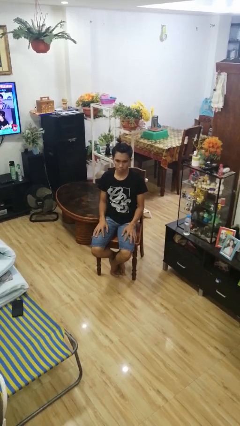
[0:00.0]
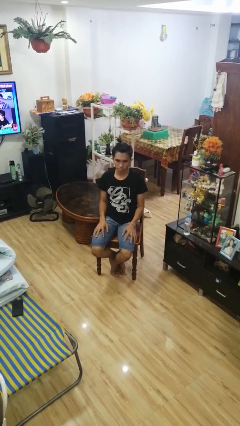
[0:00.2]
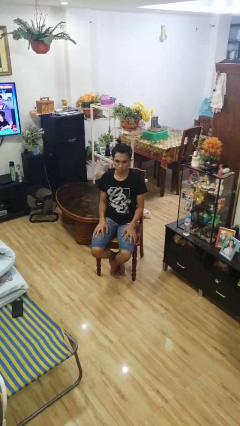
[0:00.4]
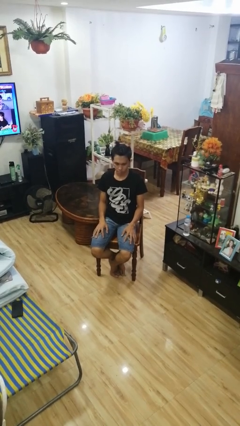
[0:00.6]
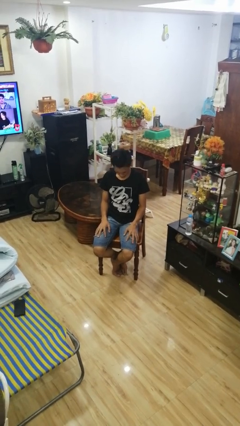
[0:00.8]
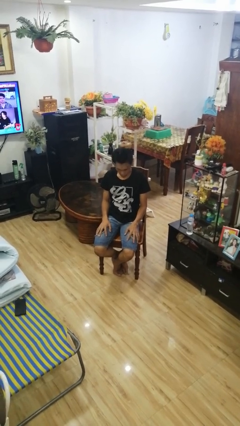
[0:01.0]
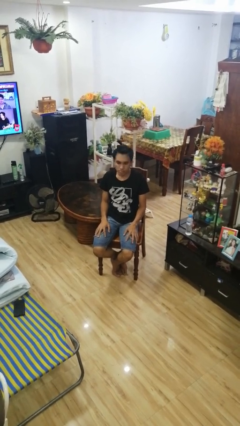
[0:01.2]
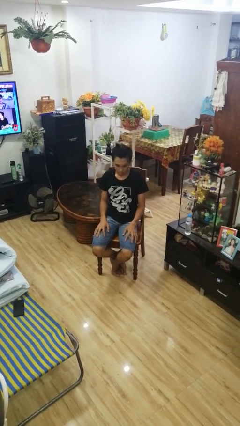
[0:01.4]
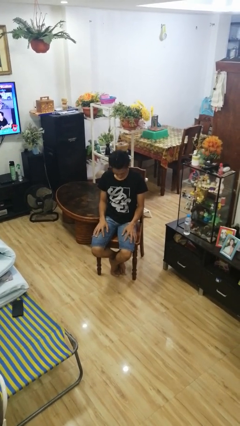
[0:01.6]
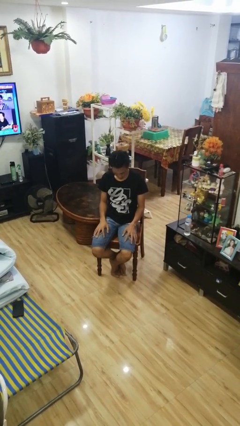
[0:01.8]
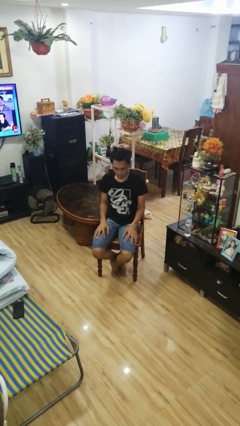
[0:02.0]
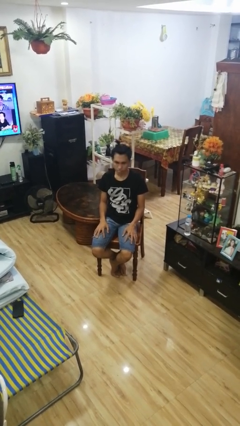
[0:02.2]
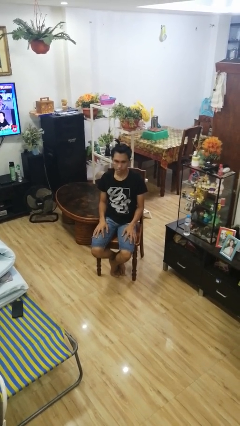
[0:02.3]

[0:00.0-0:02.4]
person nods head

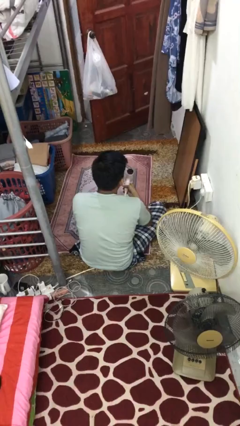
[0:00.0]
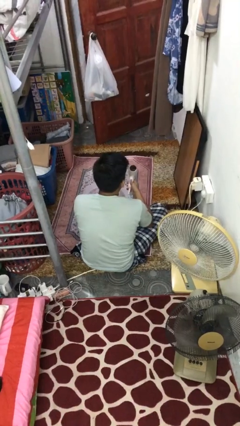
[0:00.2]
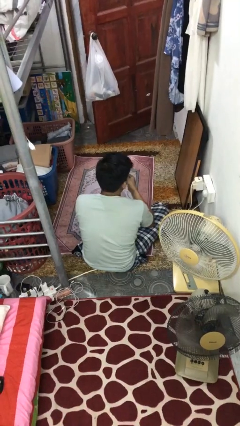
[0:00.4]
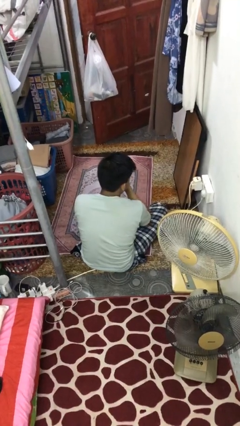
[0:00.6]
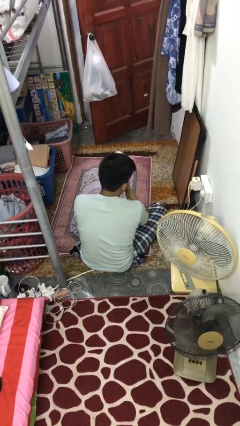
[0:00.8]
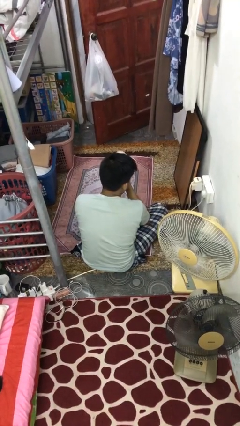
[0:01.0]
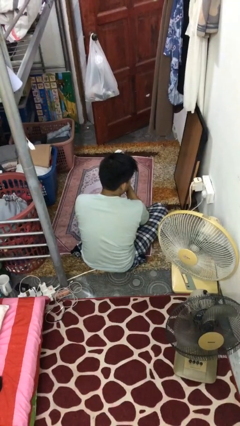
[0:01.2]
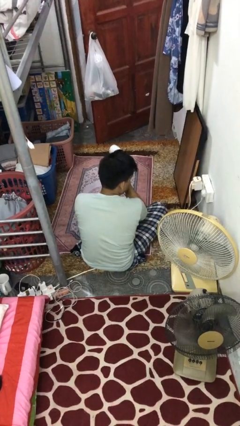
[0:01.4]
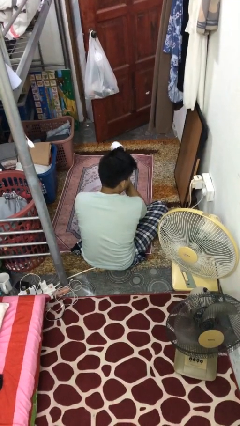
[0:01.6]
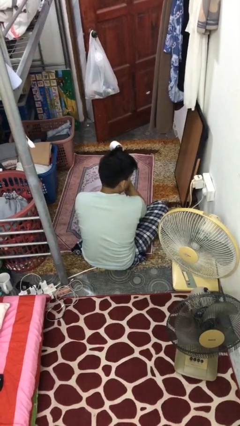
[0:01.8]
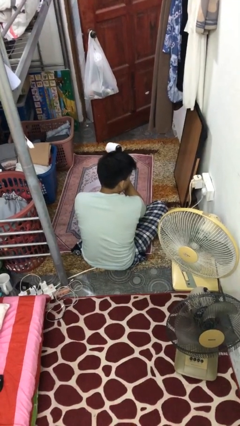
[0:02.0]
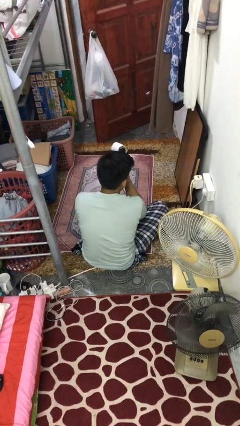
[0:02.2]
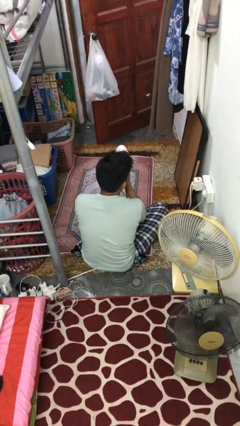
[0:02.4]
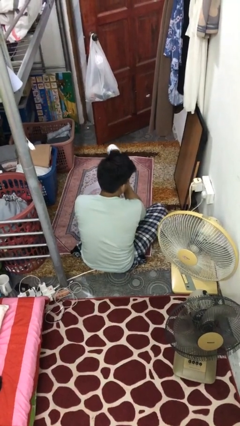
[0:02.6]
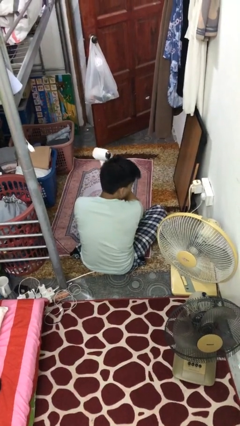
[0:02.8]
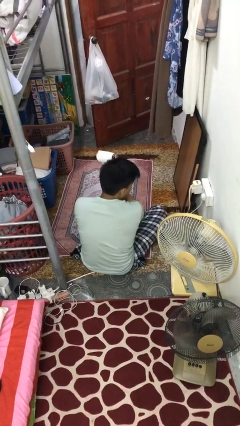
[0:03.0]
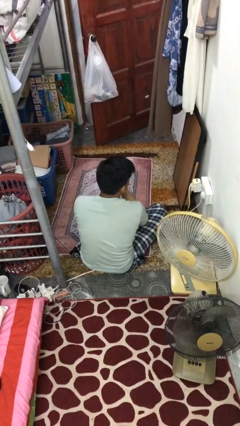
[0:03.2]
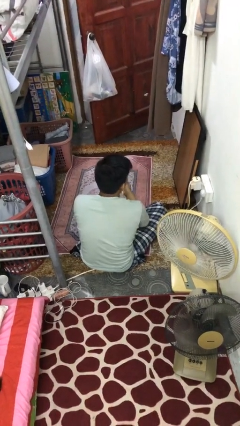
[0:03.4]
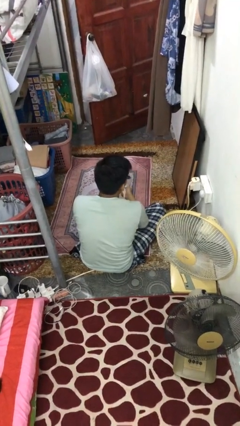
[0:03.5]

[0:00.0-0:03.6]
person dries hair with hairdryer

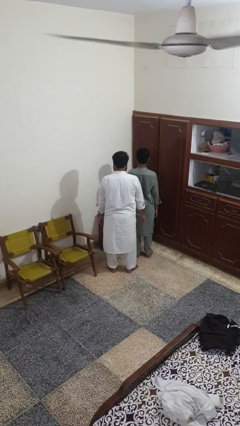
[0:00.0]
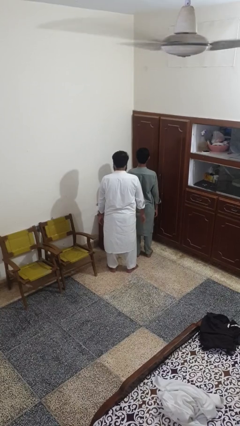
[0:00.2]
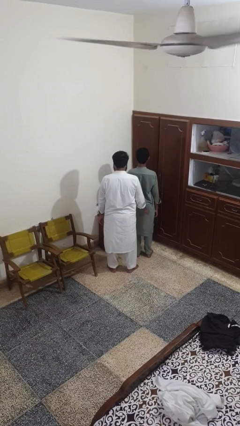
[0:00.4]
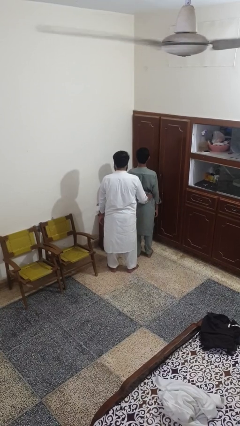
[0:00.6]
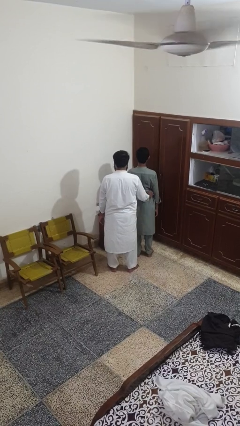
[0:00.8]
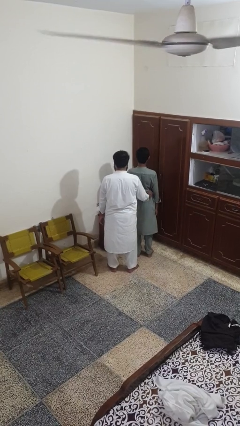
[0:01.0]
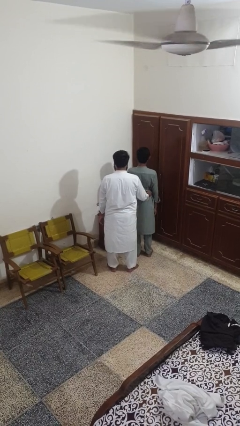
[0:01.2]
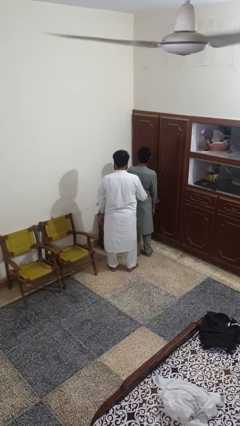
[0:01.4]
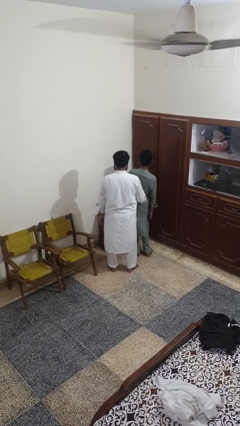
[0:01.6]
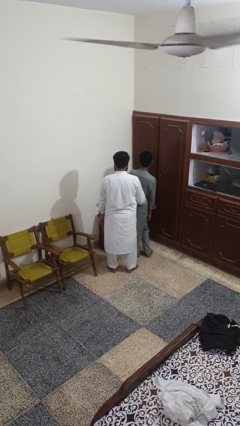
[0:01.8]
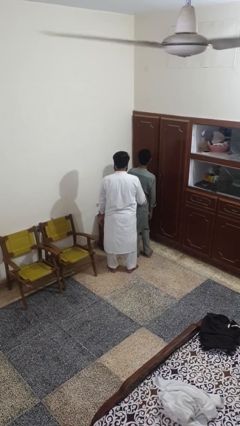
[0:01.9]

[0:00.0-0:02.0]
person tickles person

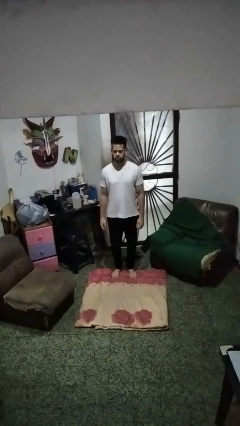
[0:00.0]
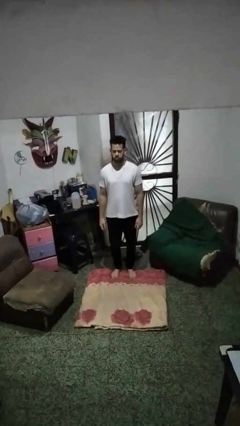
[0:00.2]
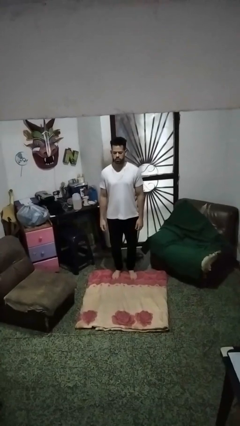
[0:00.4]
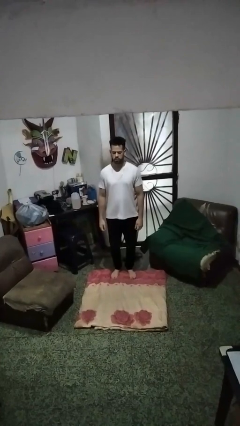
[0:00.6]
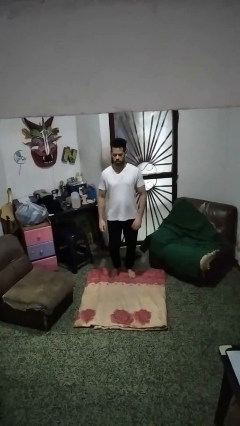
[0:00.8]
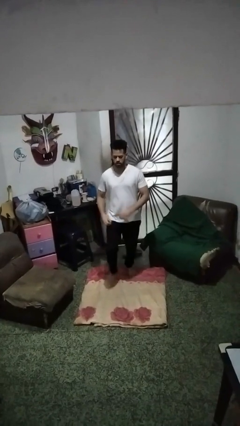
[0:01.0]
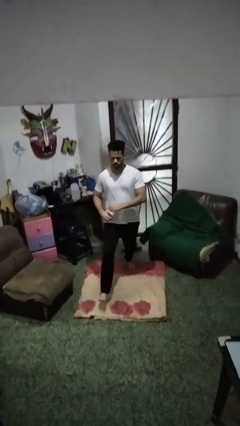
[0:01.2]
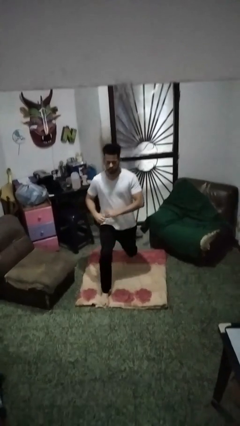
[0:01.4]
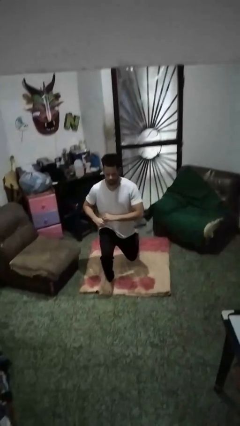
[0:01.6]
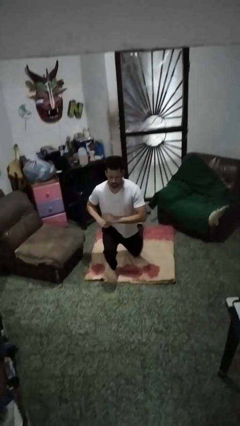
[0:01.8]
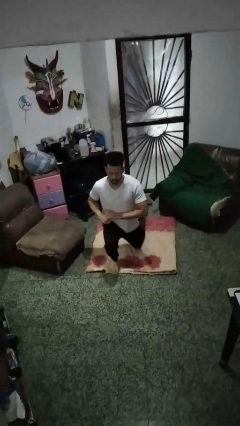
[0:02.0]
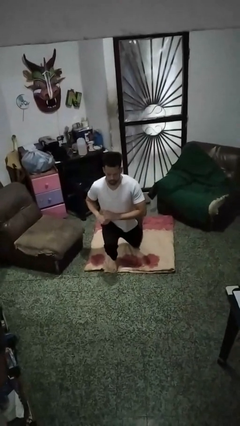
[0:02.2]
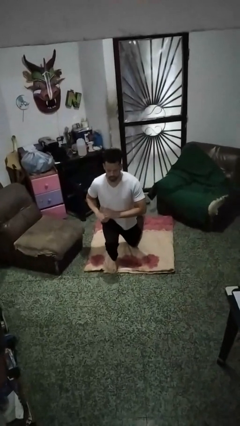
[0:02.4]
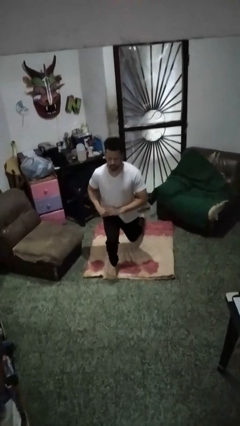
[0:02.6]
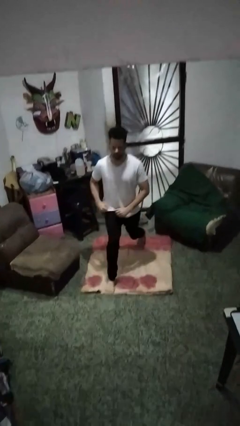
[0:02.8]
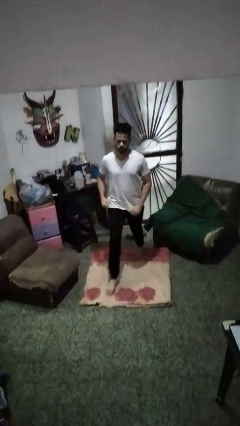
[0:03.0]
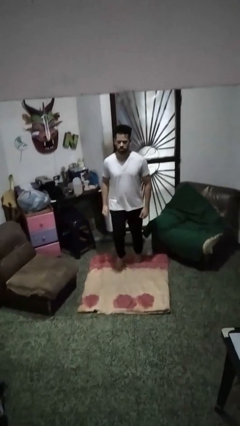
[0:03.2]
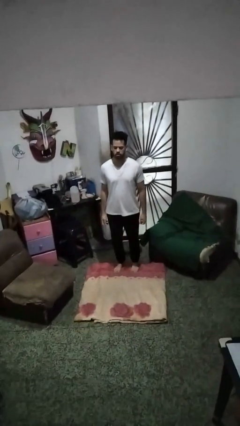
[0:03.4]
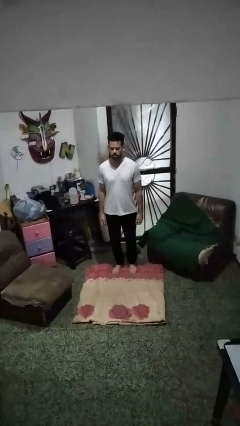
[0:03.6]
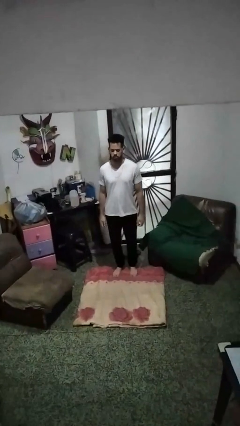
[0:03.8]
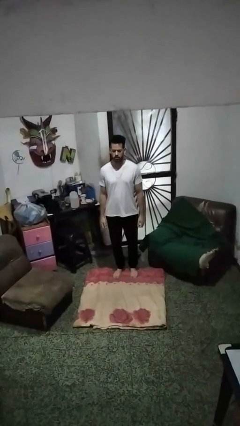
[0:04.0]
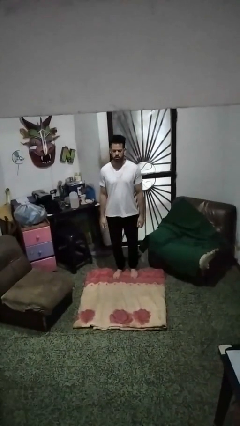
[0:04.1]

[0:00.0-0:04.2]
person exercises with lunges

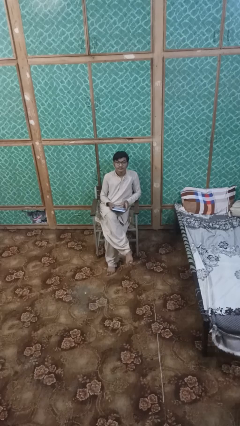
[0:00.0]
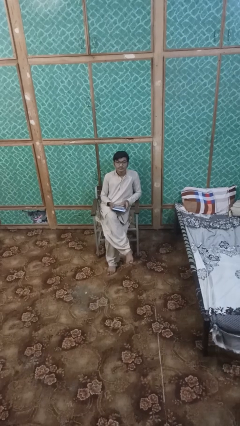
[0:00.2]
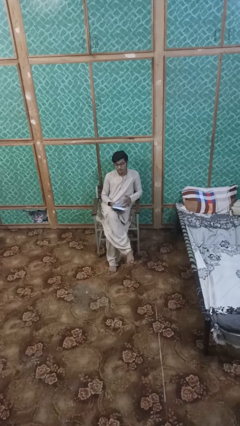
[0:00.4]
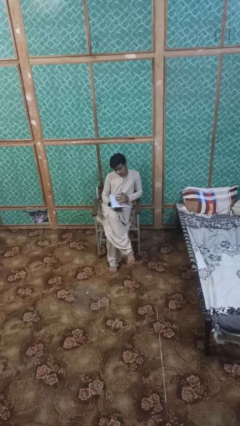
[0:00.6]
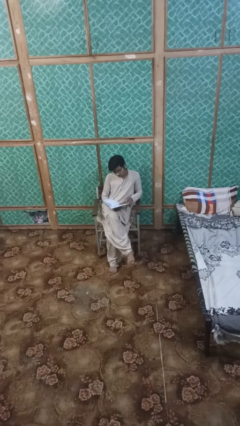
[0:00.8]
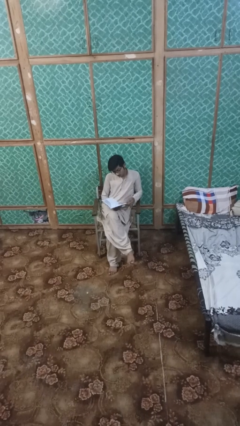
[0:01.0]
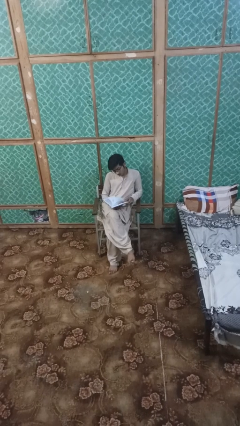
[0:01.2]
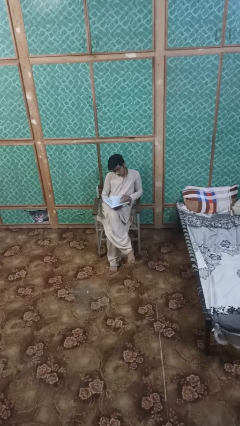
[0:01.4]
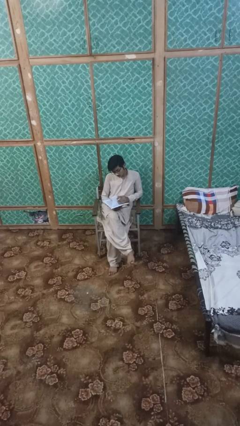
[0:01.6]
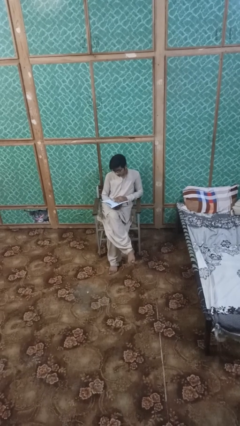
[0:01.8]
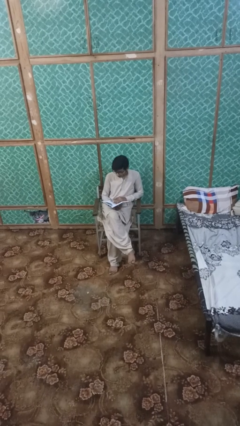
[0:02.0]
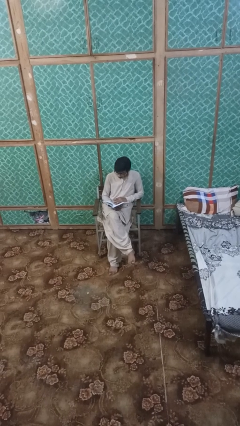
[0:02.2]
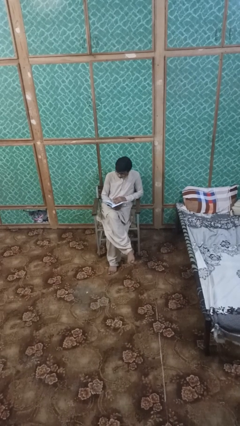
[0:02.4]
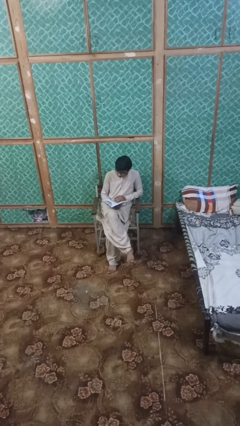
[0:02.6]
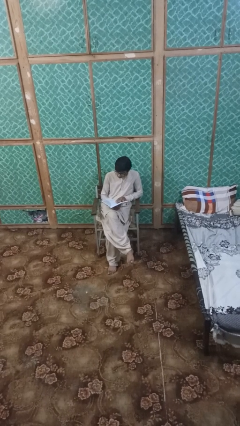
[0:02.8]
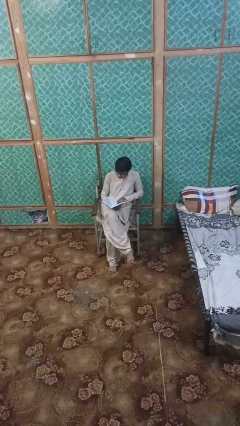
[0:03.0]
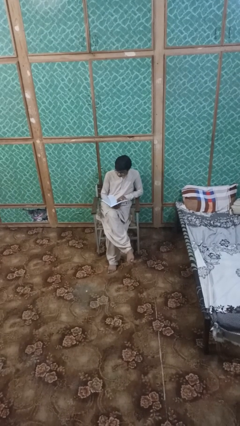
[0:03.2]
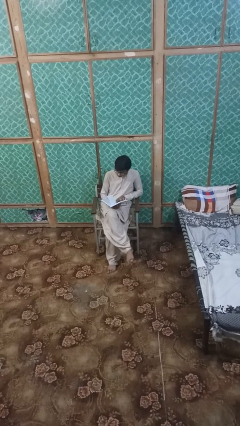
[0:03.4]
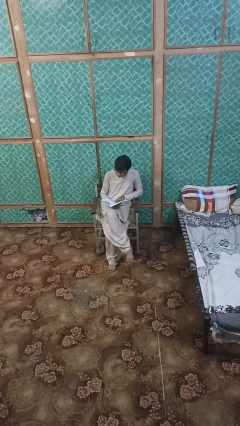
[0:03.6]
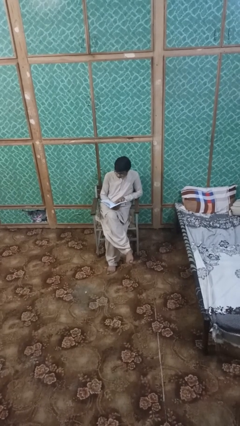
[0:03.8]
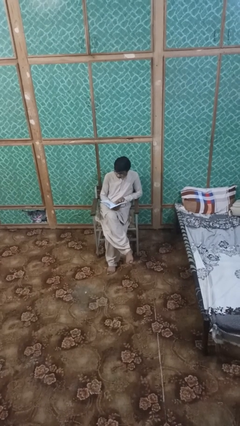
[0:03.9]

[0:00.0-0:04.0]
person reads magazine

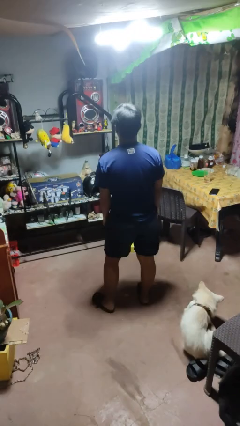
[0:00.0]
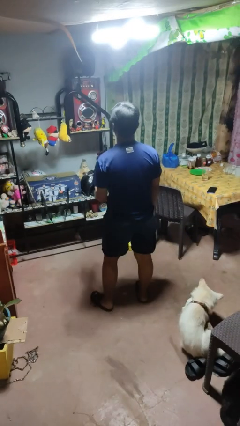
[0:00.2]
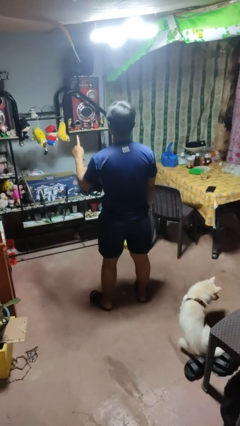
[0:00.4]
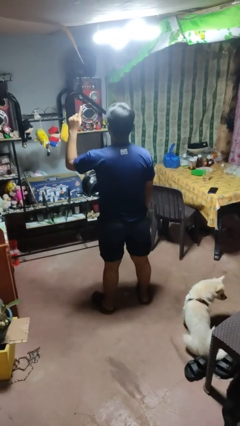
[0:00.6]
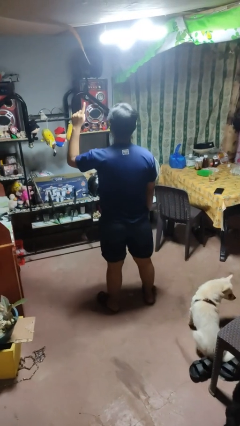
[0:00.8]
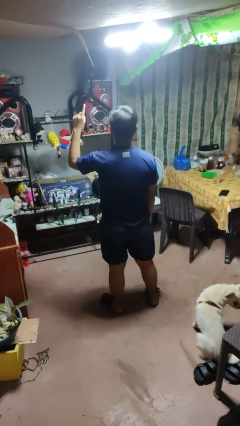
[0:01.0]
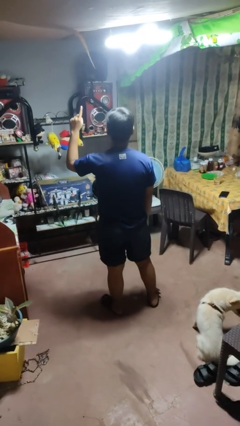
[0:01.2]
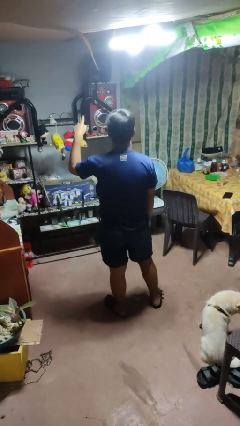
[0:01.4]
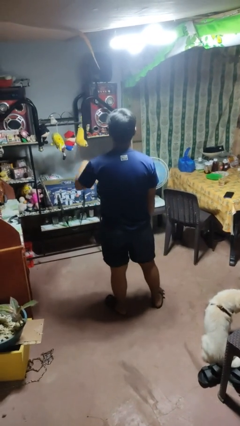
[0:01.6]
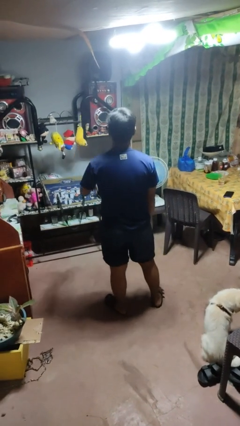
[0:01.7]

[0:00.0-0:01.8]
person gestures number one
